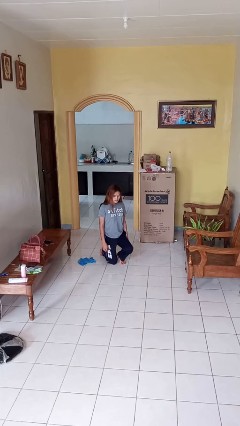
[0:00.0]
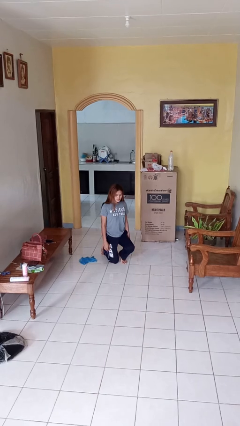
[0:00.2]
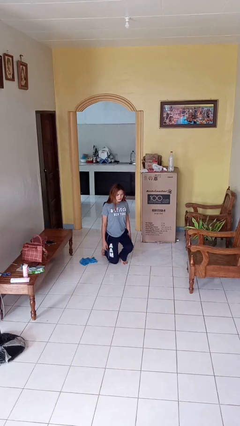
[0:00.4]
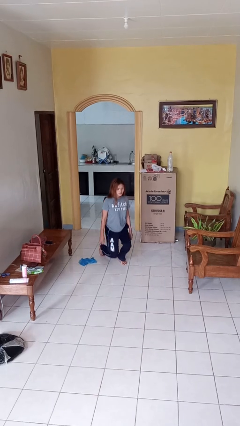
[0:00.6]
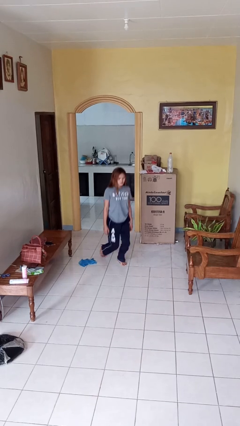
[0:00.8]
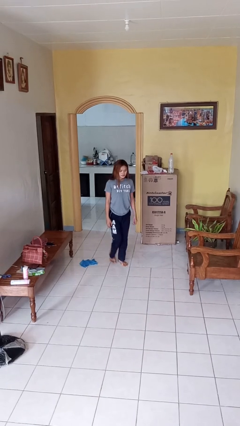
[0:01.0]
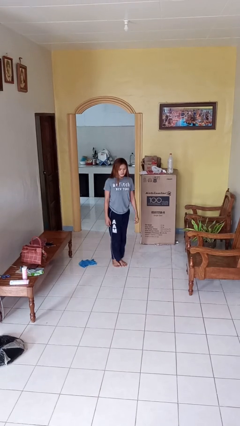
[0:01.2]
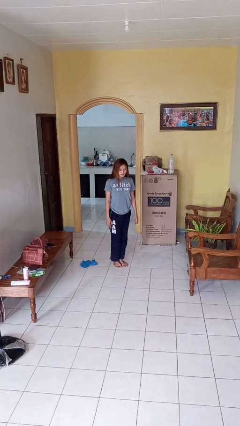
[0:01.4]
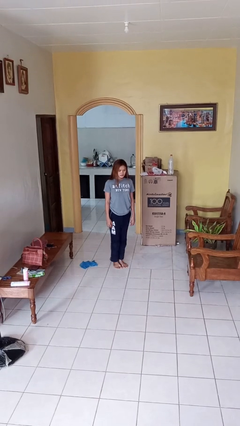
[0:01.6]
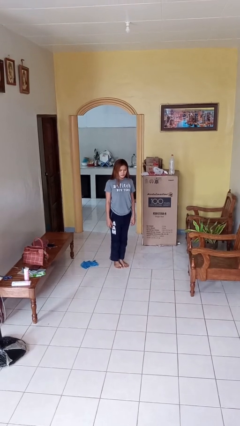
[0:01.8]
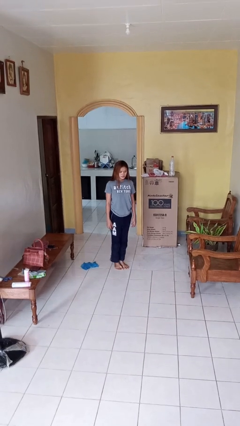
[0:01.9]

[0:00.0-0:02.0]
person stands up from floor

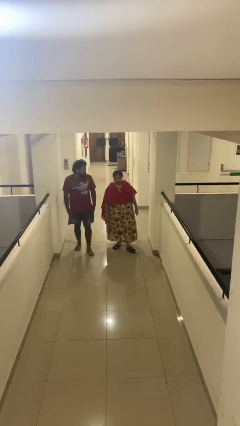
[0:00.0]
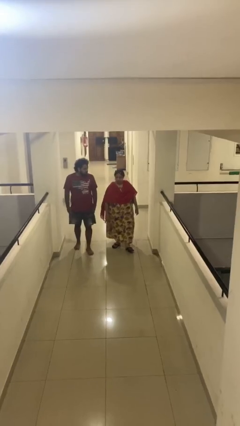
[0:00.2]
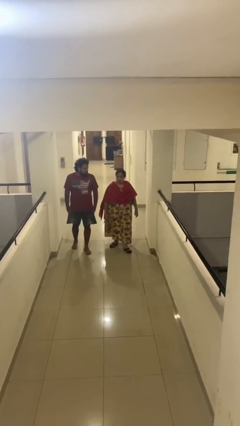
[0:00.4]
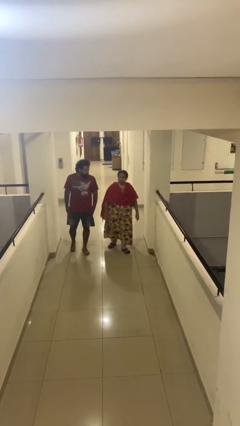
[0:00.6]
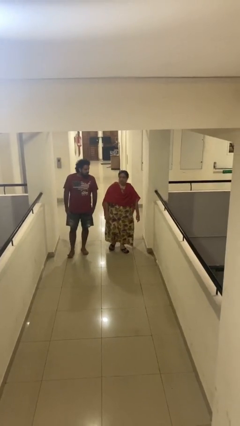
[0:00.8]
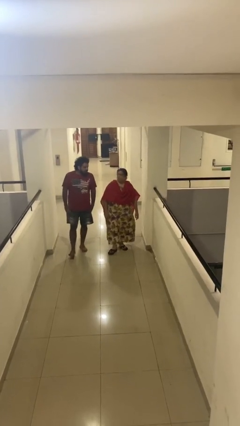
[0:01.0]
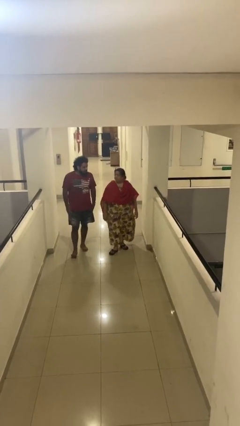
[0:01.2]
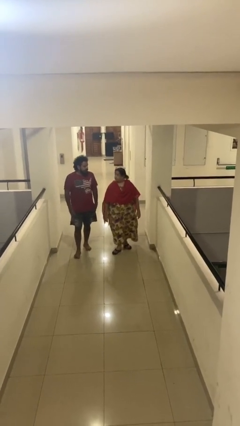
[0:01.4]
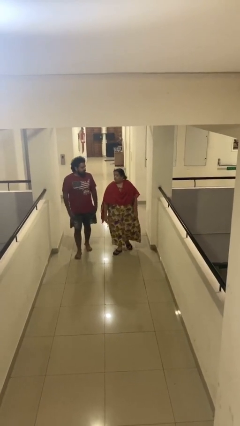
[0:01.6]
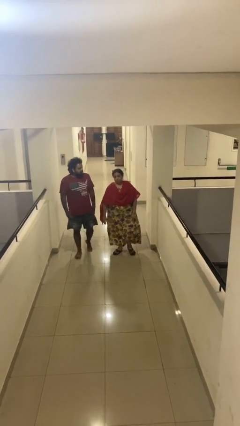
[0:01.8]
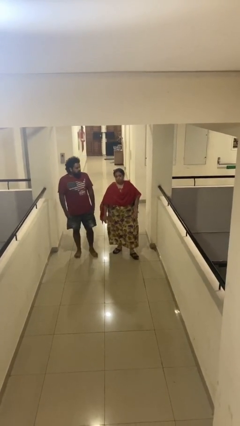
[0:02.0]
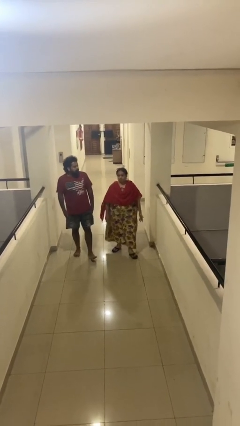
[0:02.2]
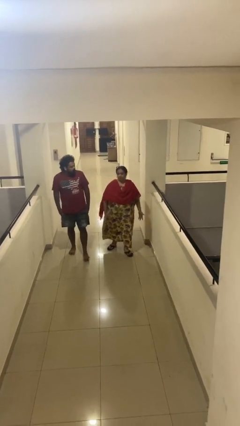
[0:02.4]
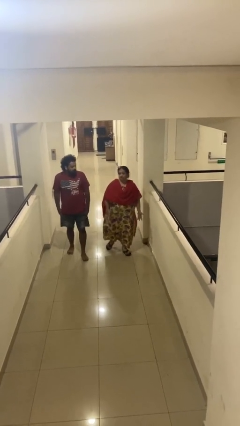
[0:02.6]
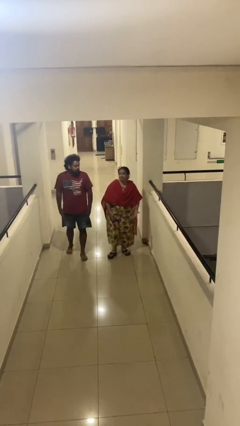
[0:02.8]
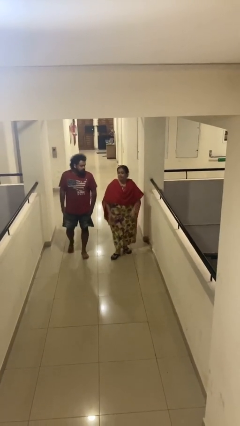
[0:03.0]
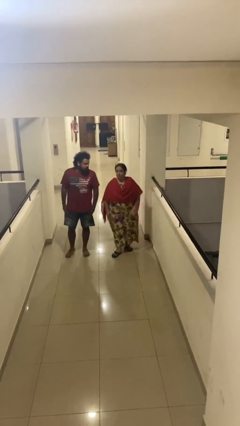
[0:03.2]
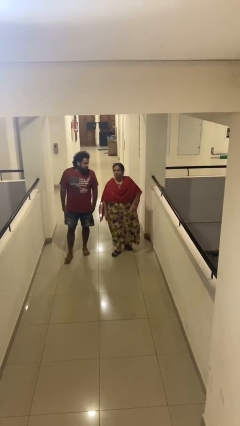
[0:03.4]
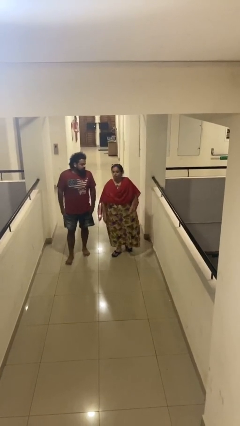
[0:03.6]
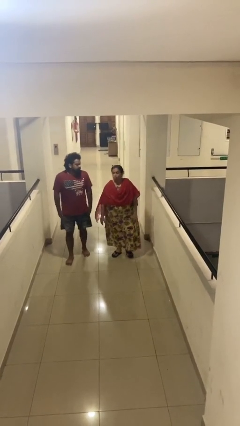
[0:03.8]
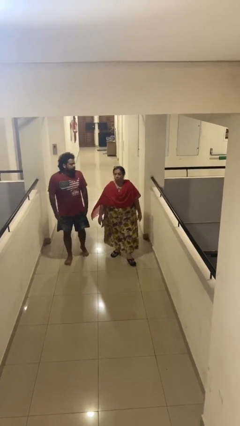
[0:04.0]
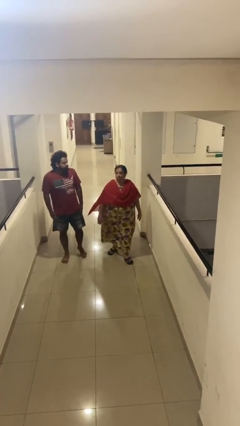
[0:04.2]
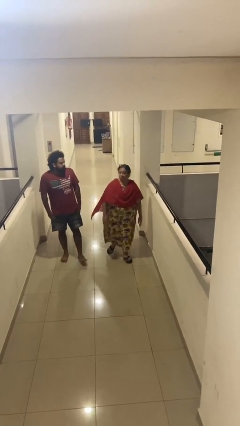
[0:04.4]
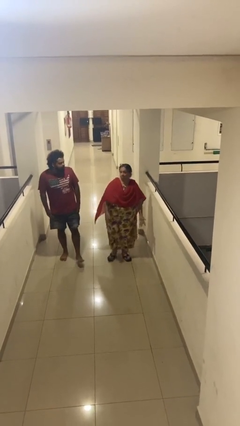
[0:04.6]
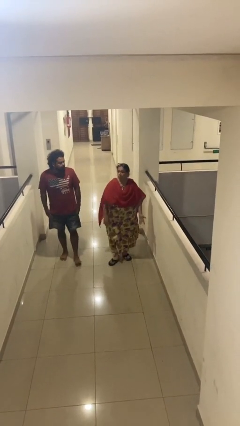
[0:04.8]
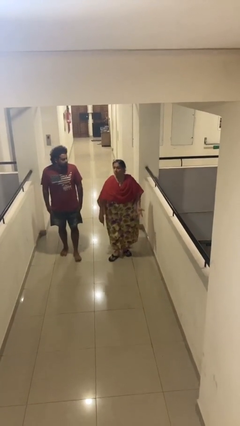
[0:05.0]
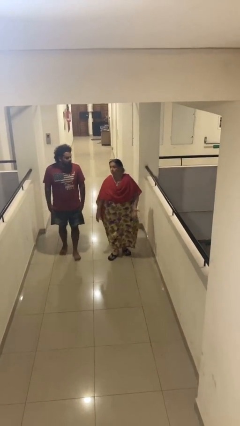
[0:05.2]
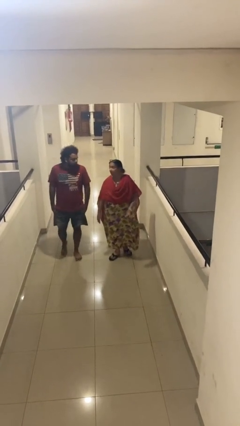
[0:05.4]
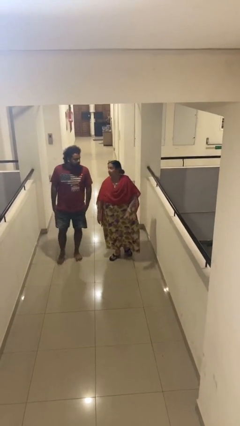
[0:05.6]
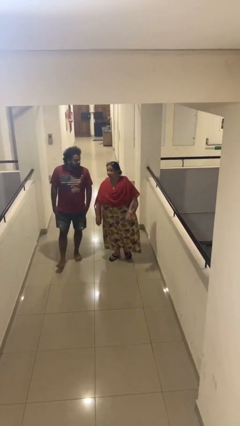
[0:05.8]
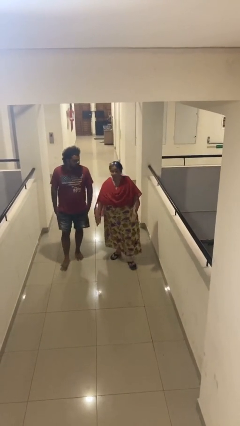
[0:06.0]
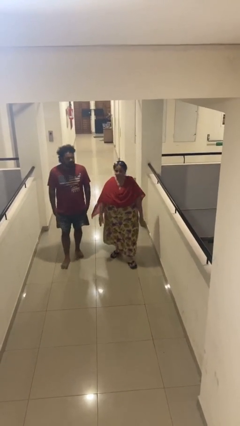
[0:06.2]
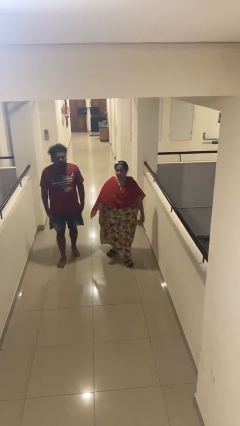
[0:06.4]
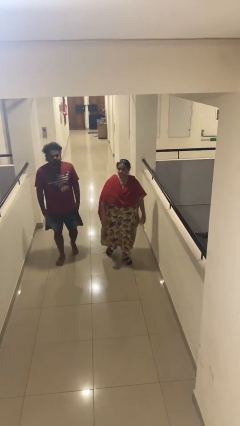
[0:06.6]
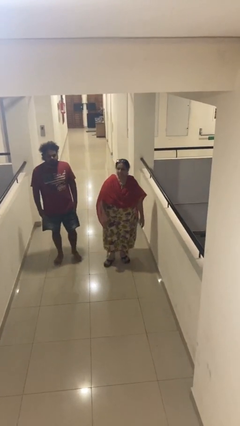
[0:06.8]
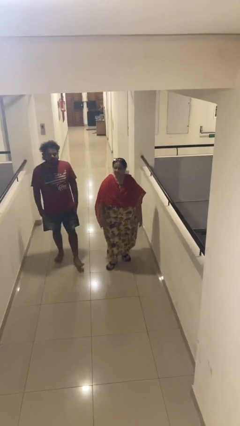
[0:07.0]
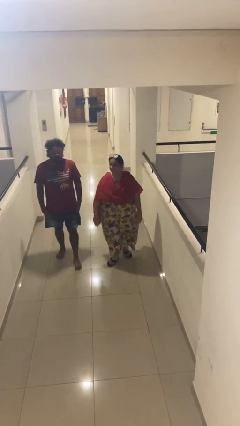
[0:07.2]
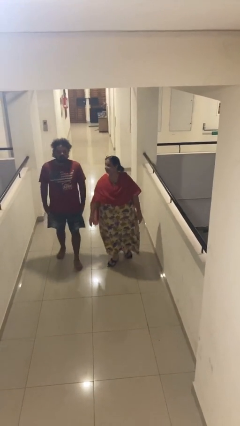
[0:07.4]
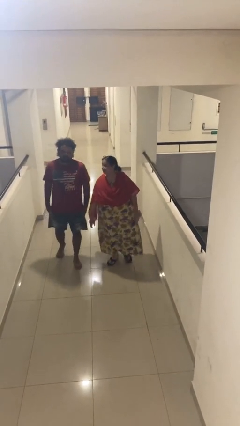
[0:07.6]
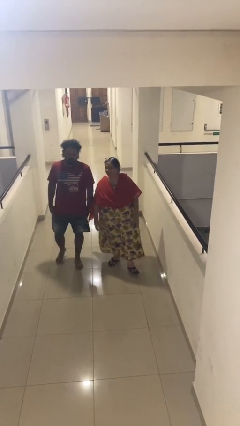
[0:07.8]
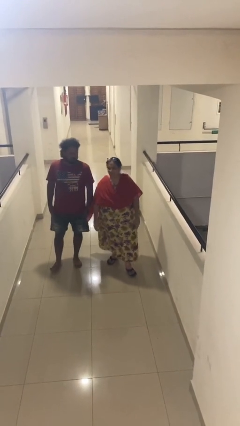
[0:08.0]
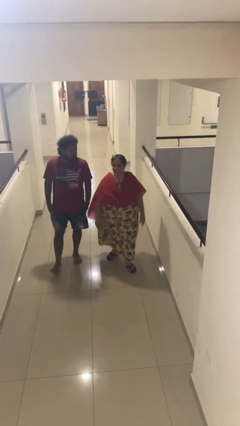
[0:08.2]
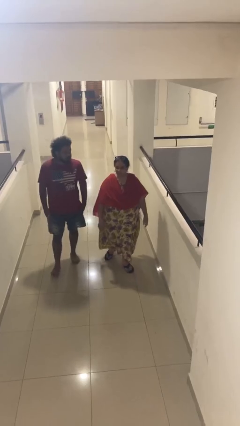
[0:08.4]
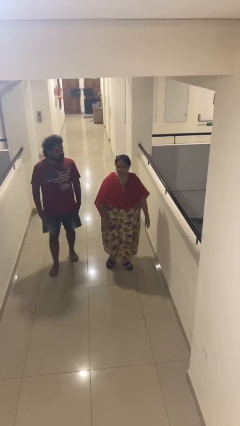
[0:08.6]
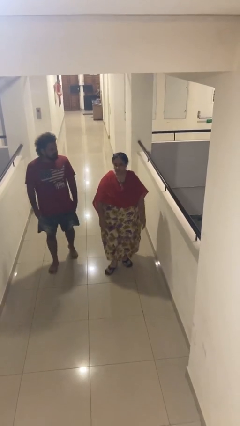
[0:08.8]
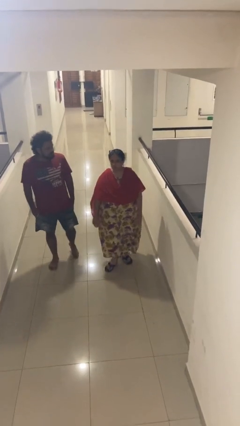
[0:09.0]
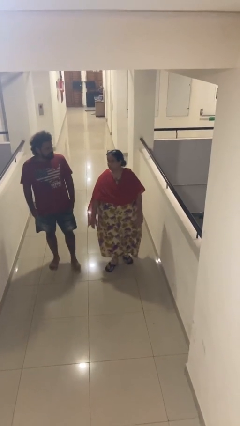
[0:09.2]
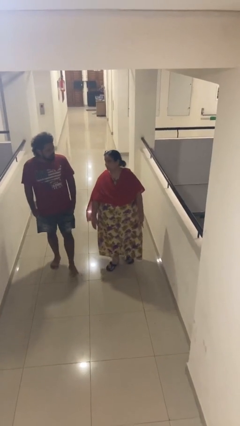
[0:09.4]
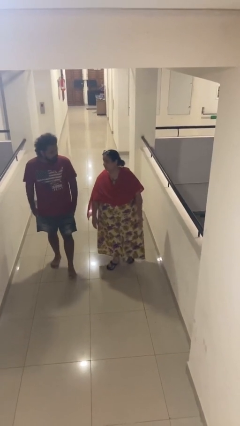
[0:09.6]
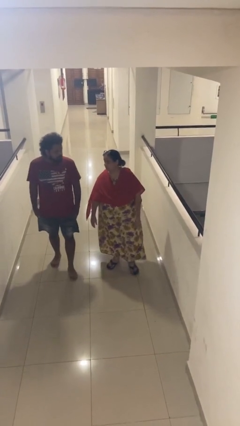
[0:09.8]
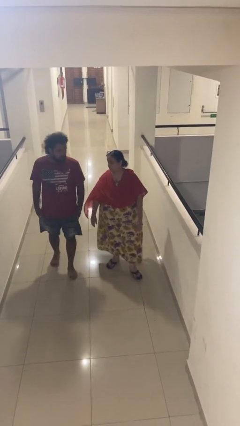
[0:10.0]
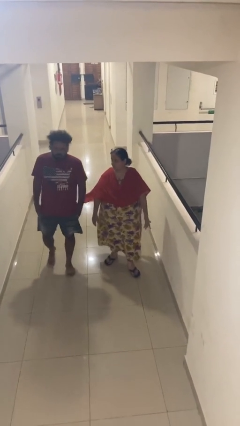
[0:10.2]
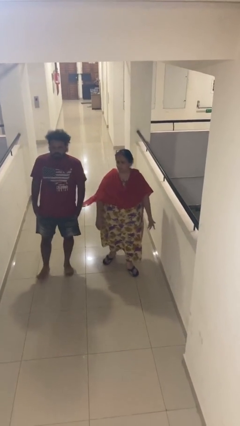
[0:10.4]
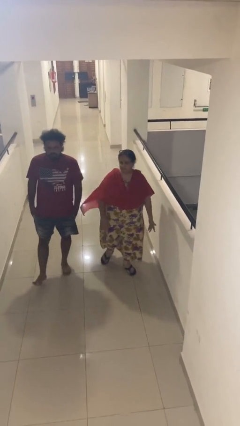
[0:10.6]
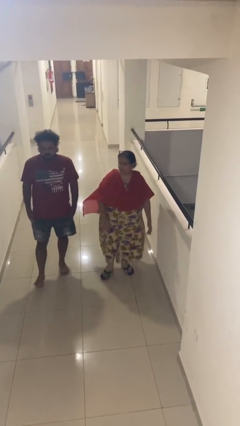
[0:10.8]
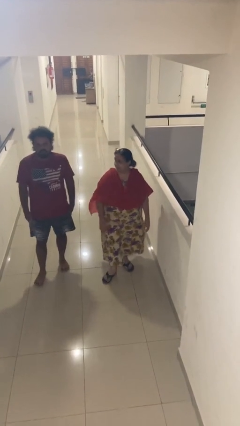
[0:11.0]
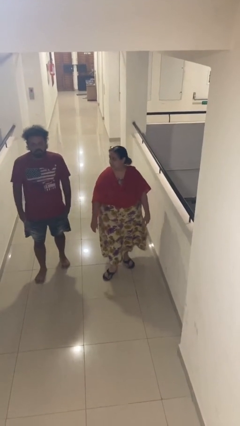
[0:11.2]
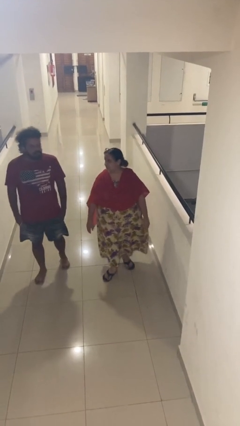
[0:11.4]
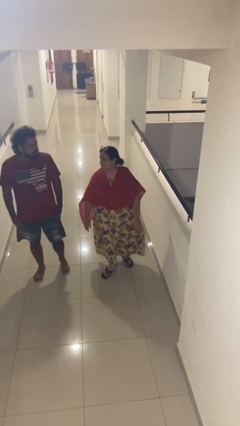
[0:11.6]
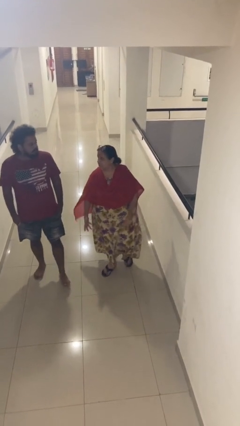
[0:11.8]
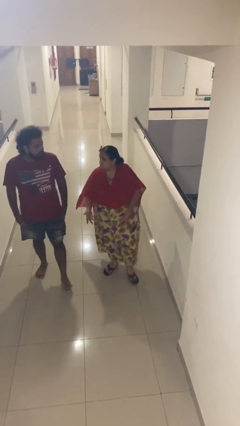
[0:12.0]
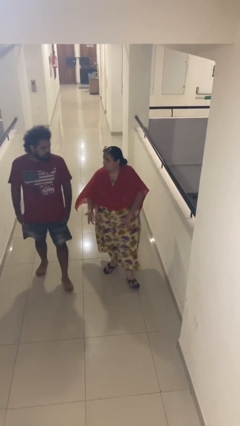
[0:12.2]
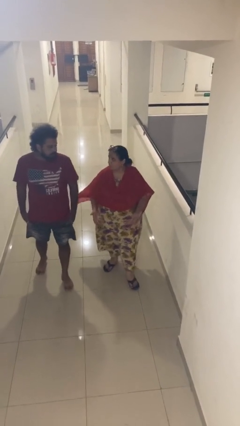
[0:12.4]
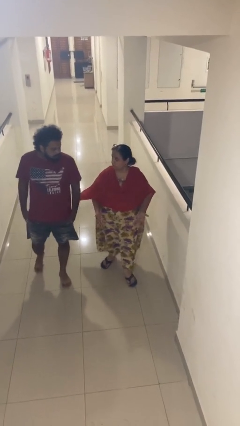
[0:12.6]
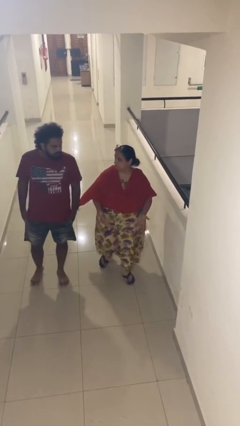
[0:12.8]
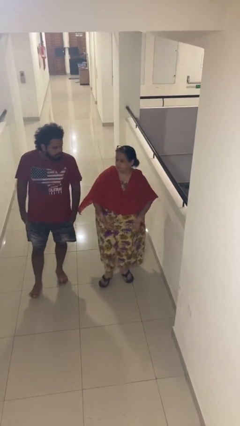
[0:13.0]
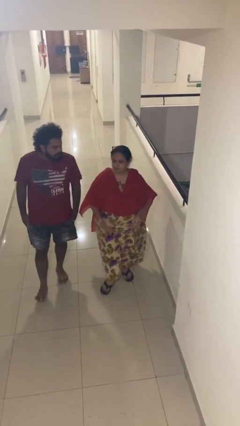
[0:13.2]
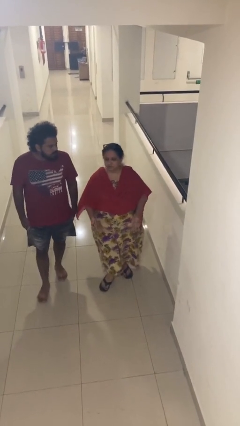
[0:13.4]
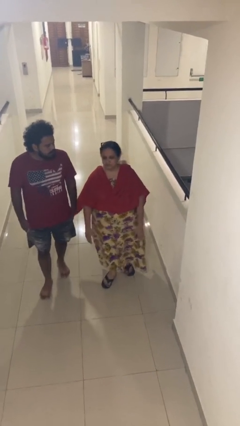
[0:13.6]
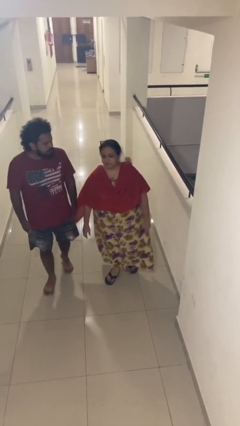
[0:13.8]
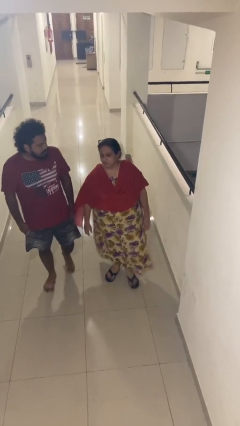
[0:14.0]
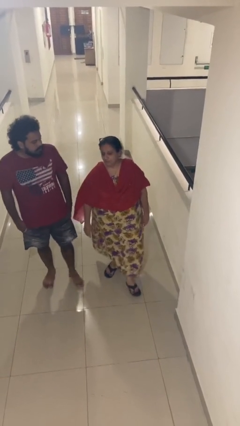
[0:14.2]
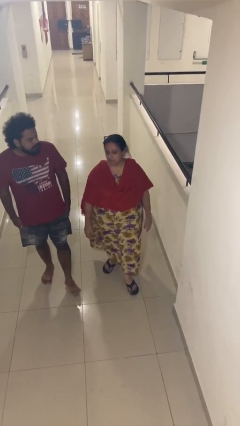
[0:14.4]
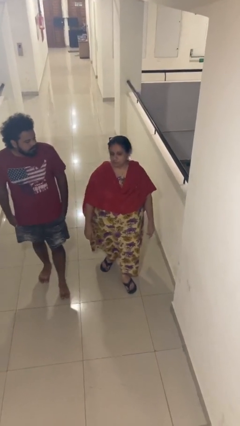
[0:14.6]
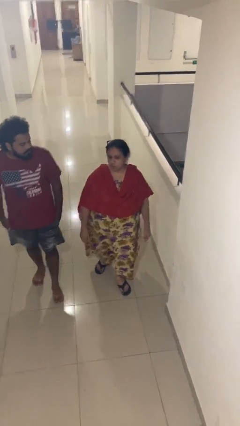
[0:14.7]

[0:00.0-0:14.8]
person talks to person

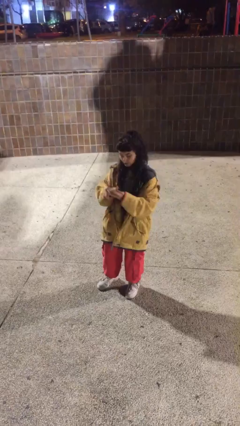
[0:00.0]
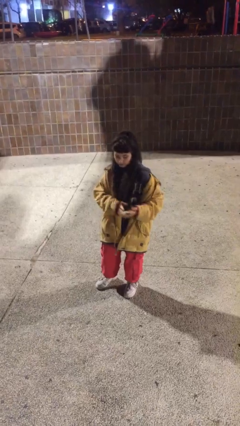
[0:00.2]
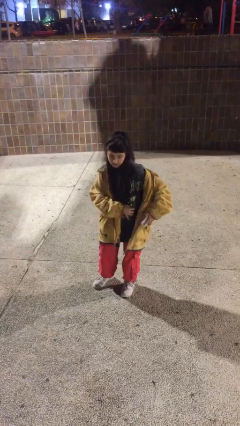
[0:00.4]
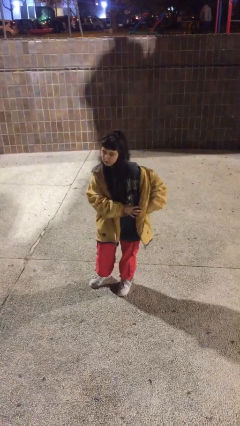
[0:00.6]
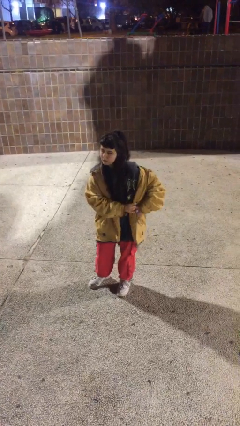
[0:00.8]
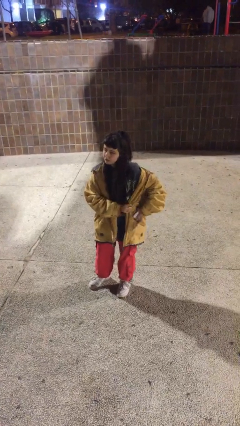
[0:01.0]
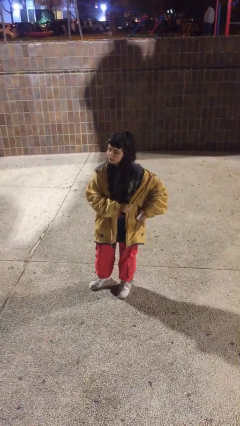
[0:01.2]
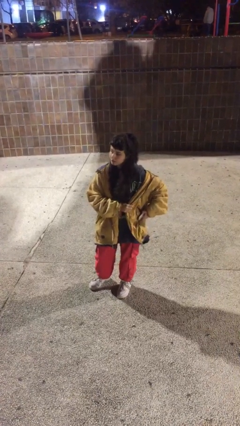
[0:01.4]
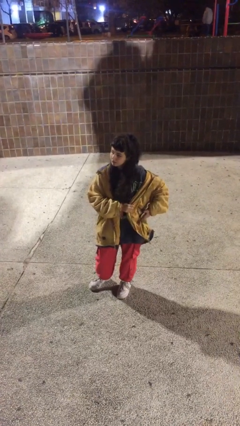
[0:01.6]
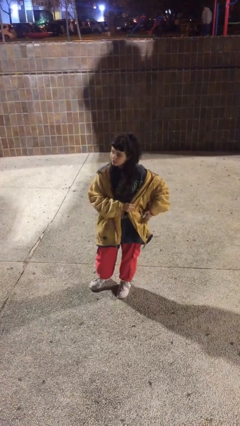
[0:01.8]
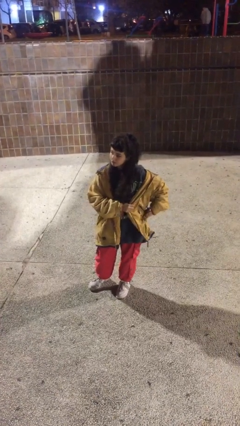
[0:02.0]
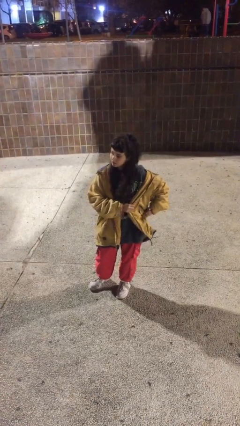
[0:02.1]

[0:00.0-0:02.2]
person puts phone into pocket
